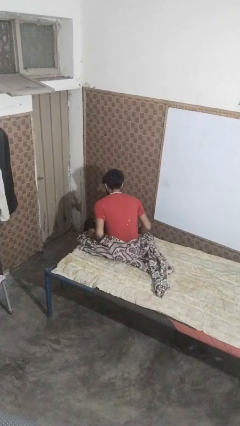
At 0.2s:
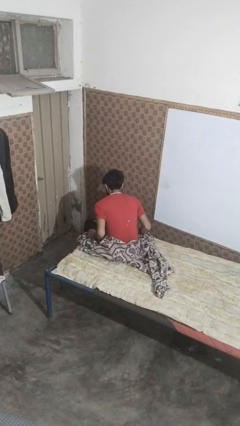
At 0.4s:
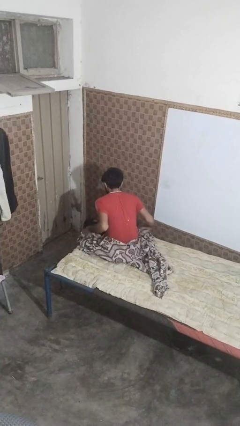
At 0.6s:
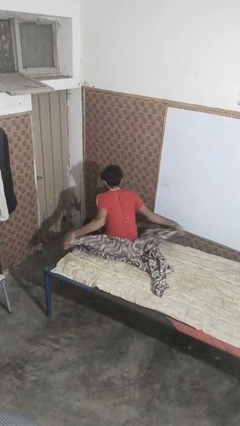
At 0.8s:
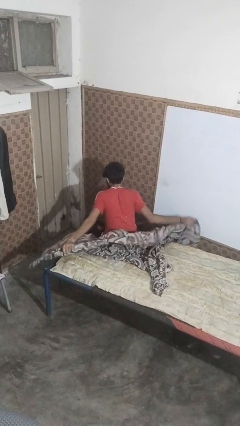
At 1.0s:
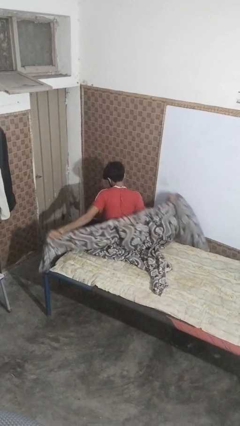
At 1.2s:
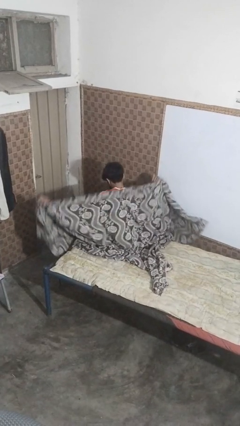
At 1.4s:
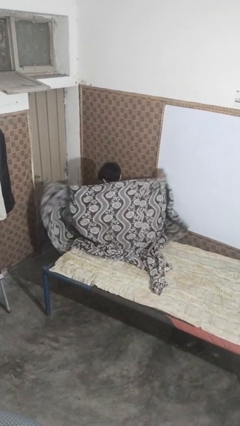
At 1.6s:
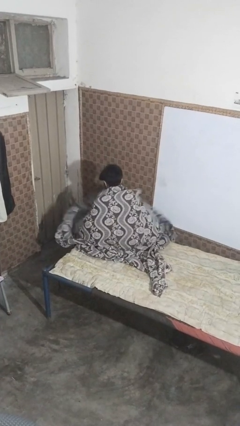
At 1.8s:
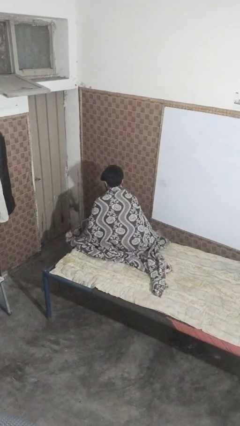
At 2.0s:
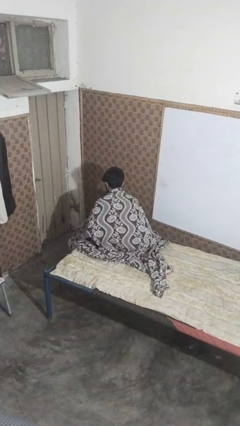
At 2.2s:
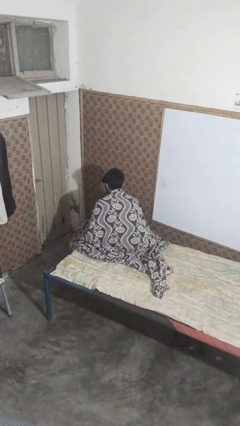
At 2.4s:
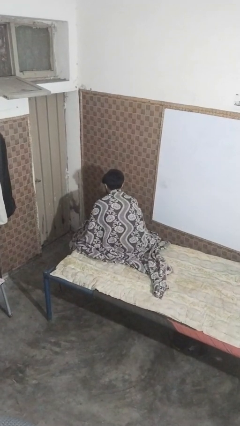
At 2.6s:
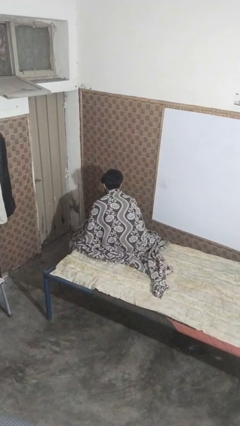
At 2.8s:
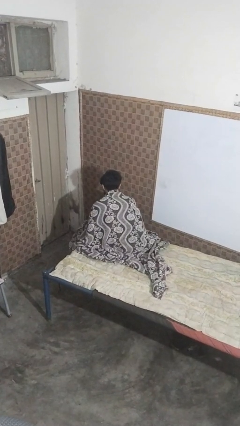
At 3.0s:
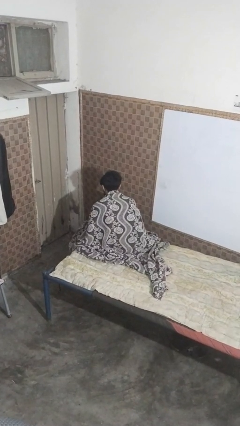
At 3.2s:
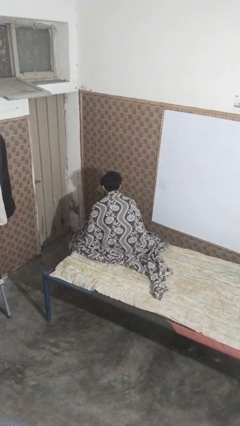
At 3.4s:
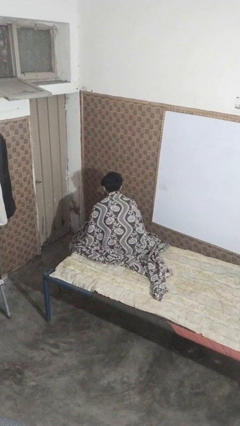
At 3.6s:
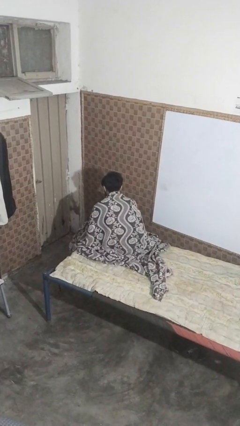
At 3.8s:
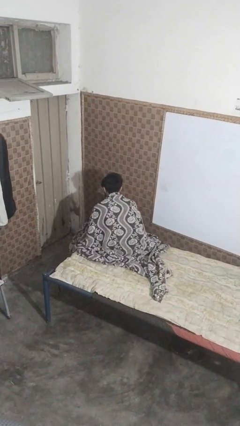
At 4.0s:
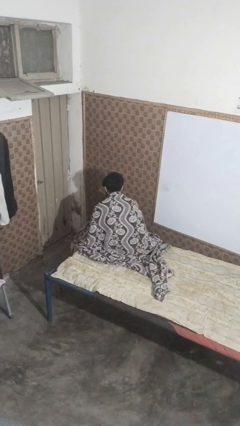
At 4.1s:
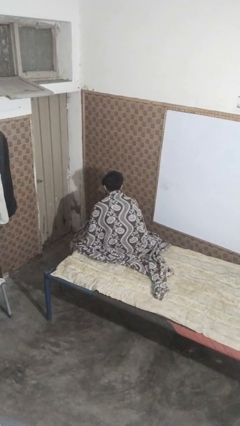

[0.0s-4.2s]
person covers with bedsheets

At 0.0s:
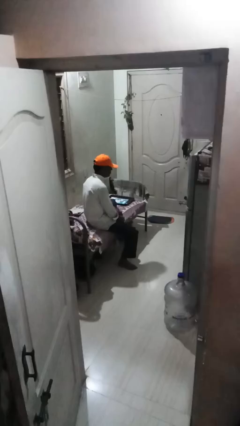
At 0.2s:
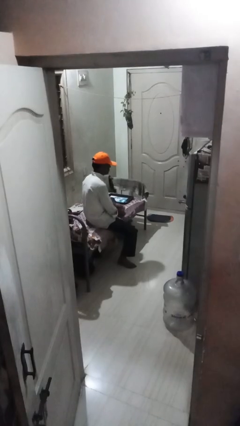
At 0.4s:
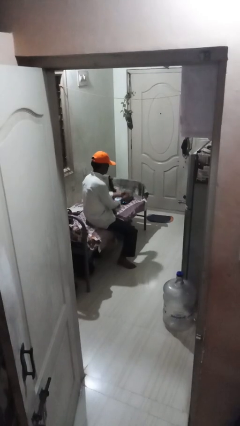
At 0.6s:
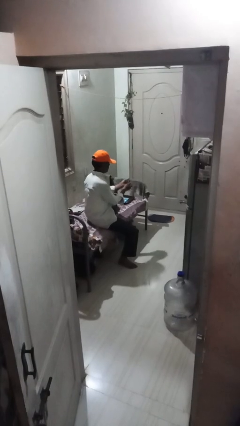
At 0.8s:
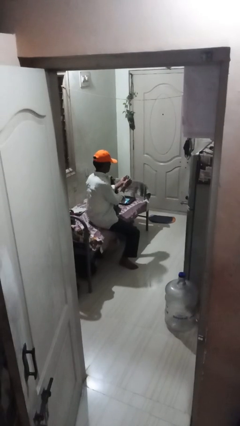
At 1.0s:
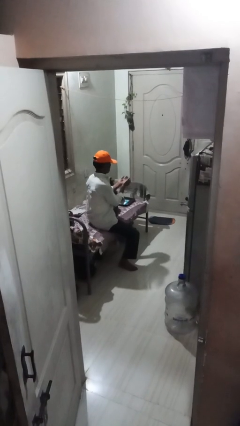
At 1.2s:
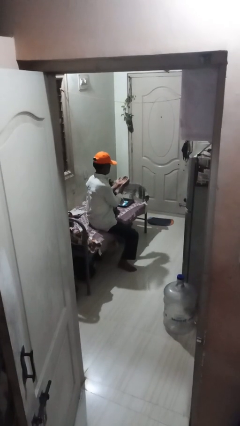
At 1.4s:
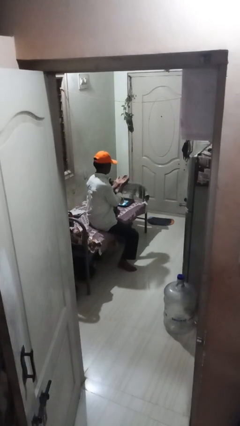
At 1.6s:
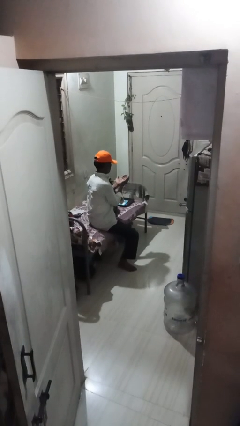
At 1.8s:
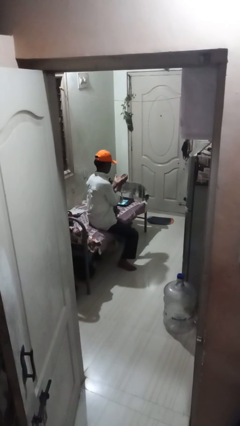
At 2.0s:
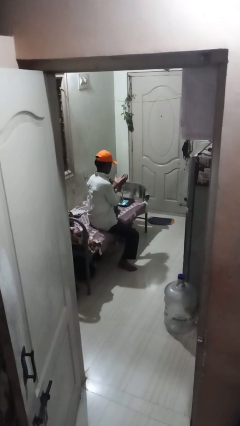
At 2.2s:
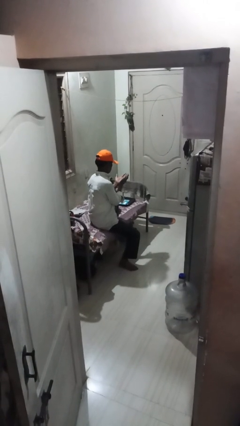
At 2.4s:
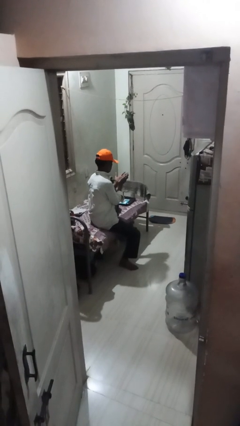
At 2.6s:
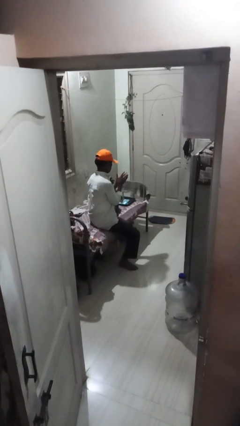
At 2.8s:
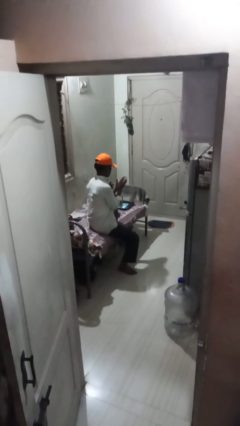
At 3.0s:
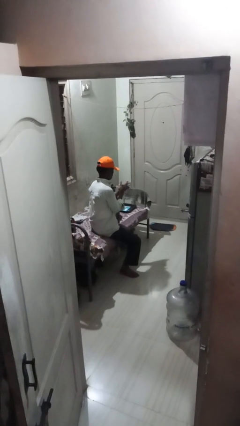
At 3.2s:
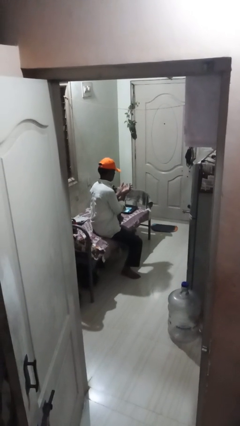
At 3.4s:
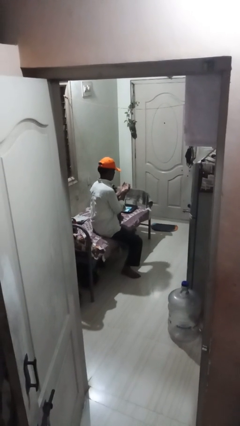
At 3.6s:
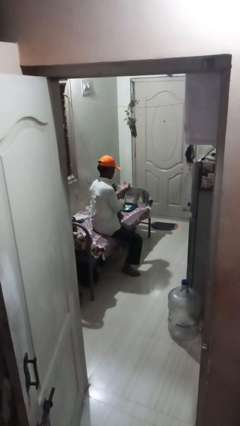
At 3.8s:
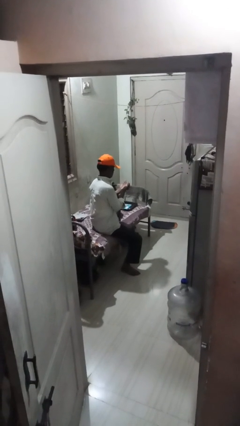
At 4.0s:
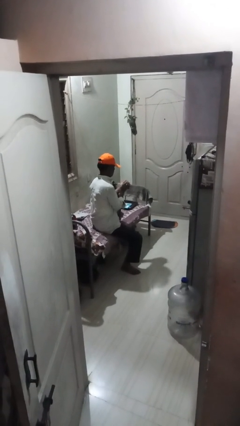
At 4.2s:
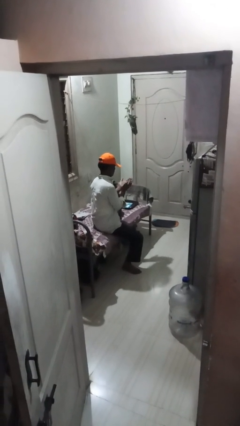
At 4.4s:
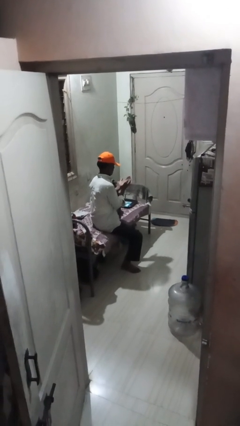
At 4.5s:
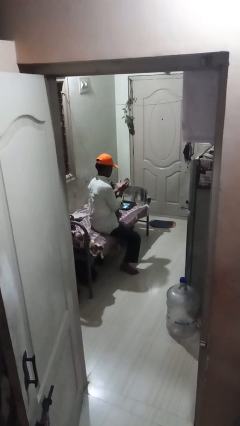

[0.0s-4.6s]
person looks at hands in lap

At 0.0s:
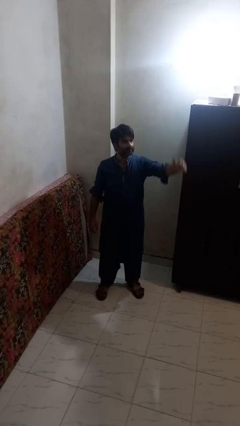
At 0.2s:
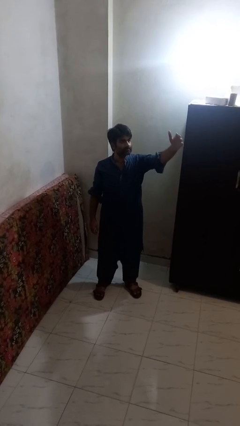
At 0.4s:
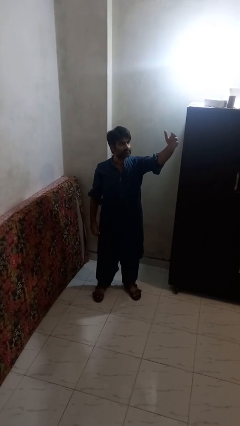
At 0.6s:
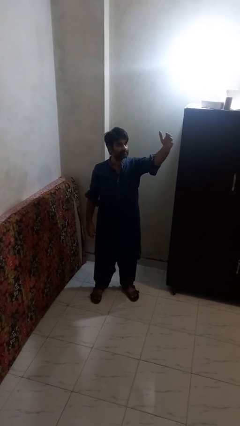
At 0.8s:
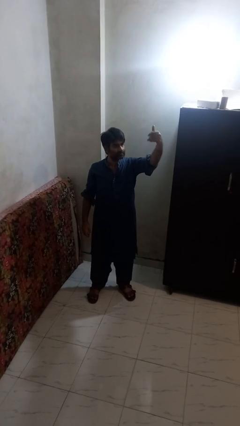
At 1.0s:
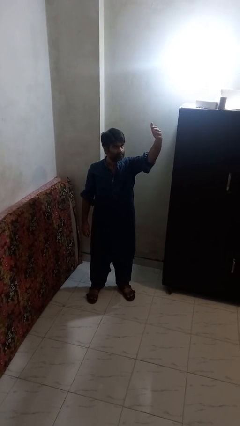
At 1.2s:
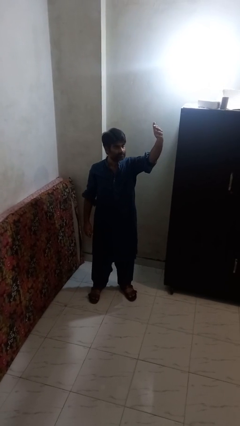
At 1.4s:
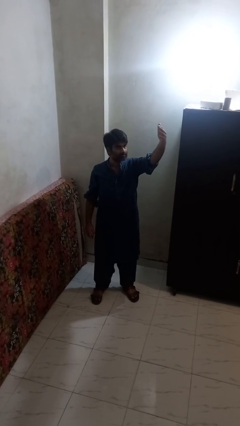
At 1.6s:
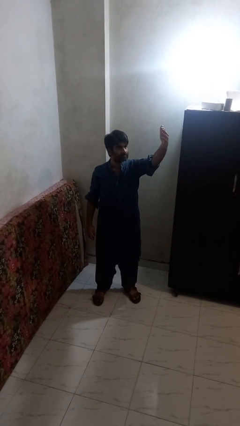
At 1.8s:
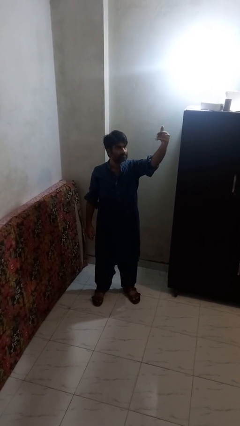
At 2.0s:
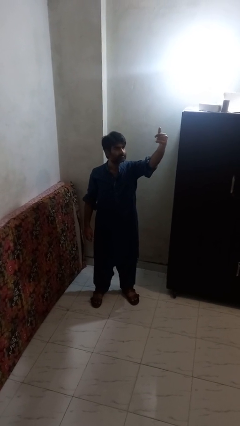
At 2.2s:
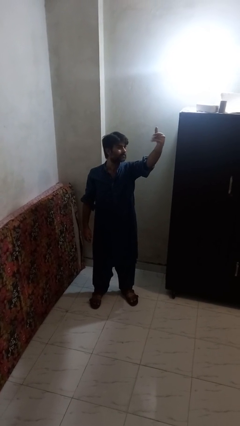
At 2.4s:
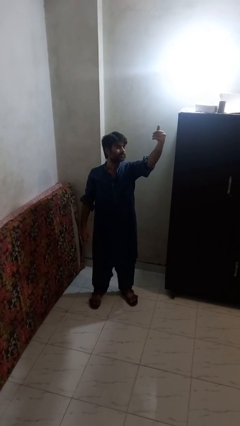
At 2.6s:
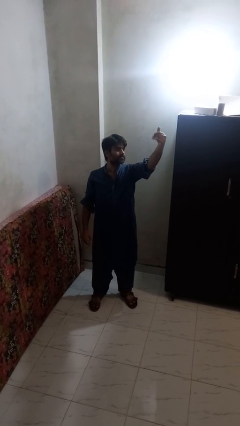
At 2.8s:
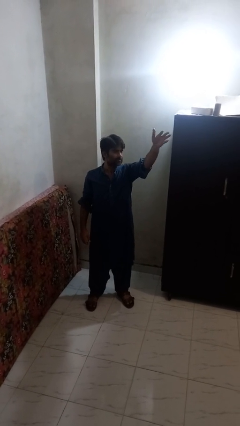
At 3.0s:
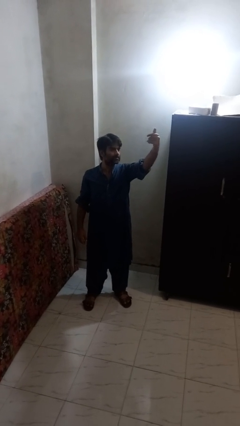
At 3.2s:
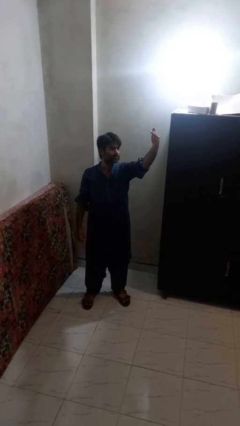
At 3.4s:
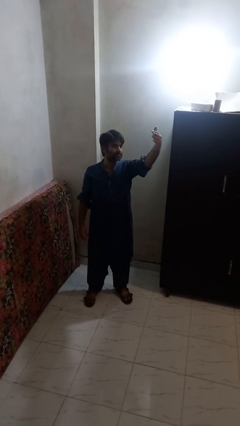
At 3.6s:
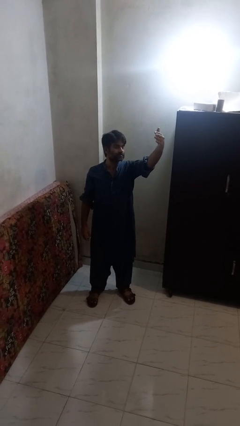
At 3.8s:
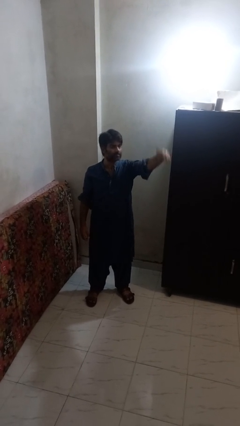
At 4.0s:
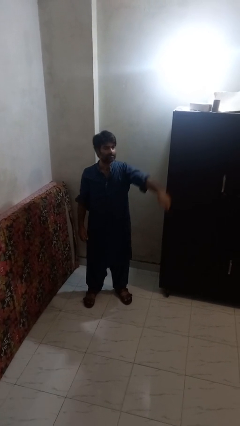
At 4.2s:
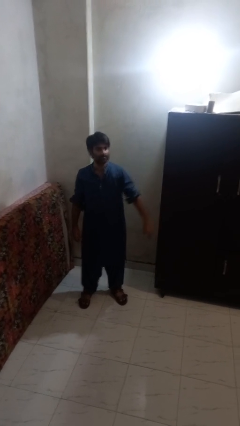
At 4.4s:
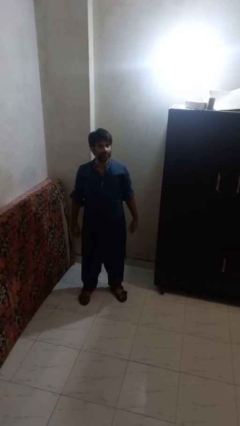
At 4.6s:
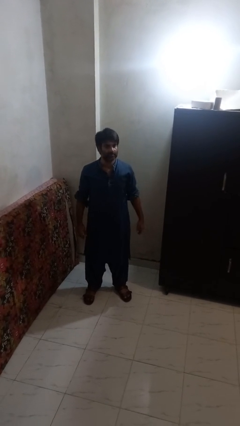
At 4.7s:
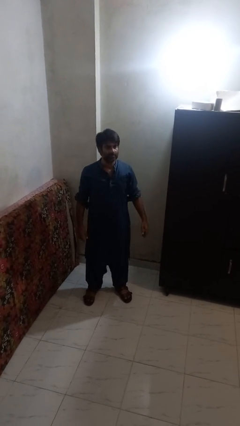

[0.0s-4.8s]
person gestures come here

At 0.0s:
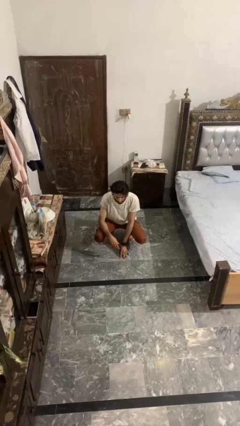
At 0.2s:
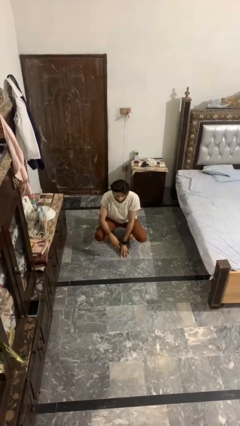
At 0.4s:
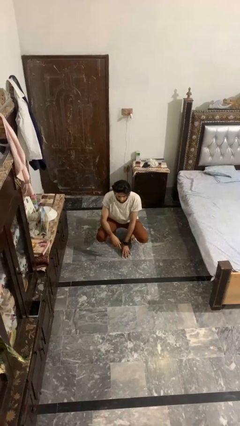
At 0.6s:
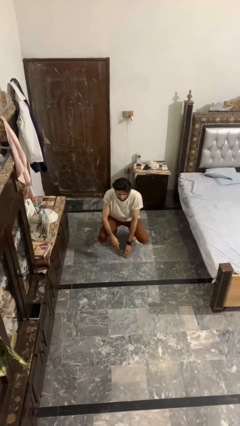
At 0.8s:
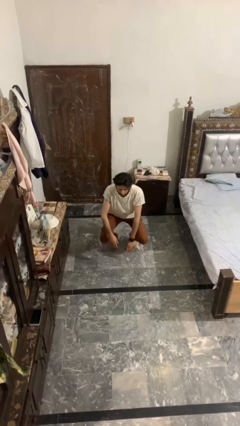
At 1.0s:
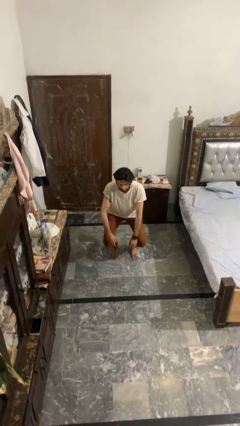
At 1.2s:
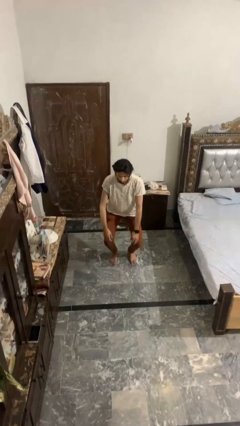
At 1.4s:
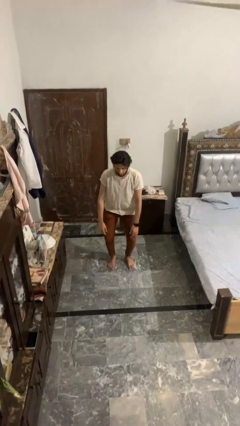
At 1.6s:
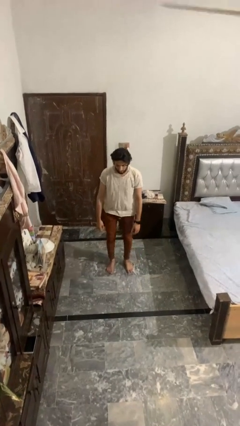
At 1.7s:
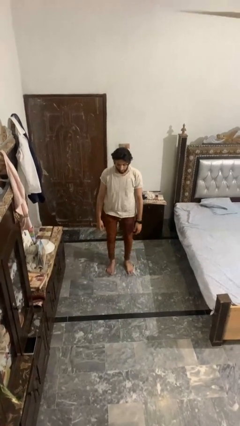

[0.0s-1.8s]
person stands up

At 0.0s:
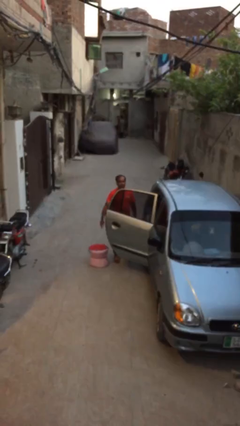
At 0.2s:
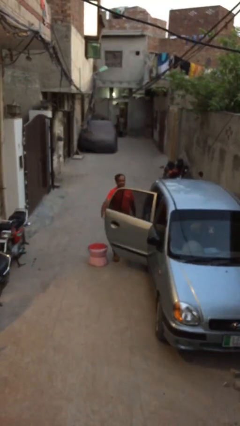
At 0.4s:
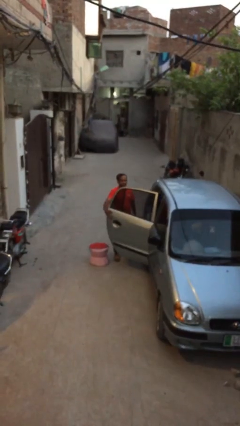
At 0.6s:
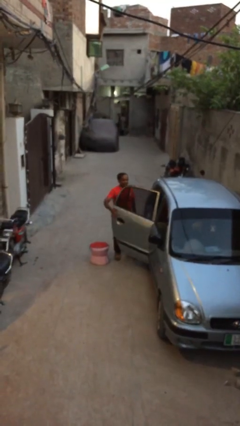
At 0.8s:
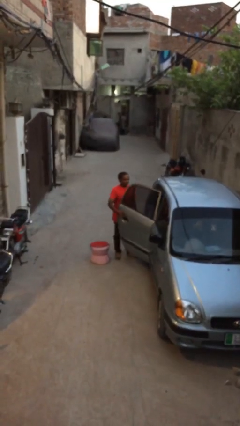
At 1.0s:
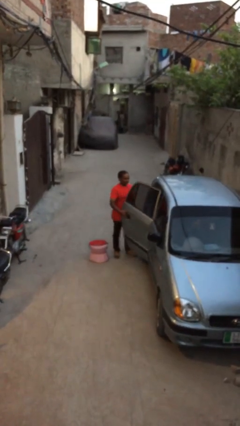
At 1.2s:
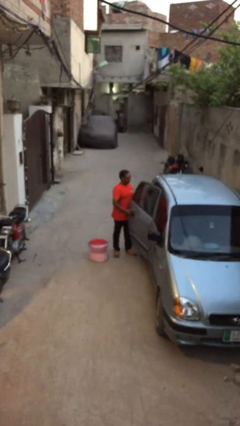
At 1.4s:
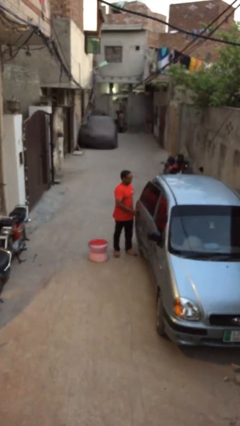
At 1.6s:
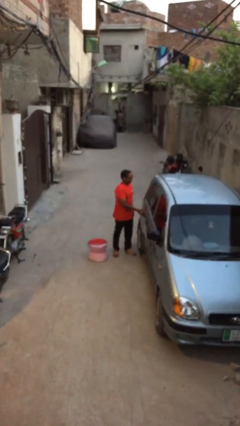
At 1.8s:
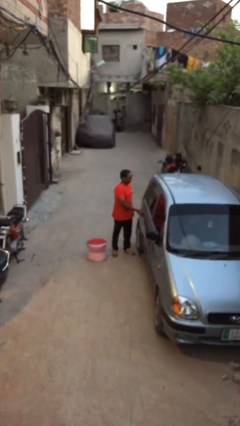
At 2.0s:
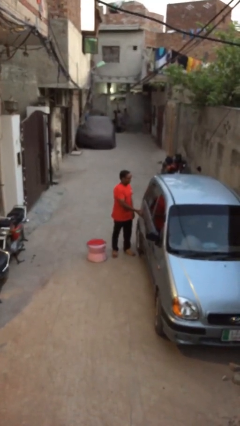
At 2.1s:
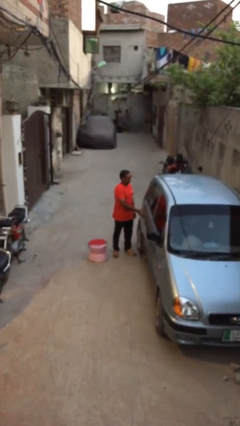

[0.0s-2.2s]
person closes car door
